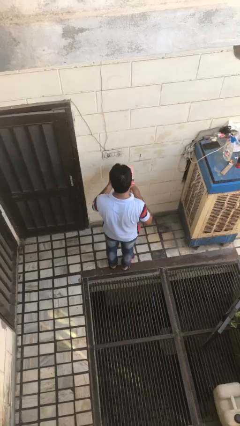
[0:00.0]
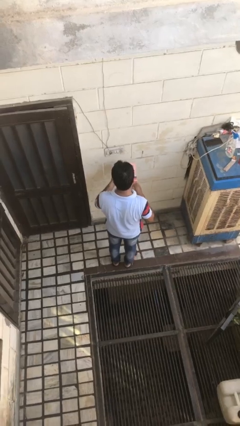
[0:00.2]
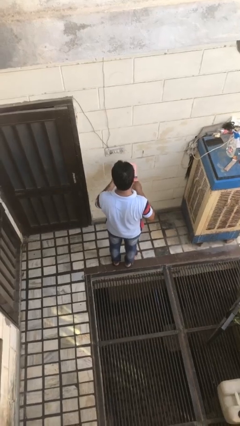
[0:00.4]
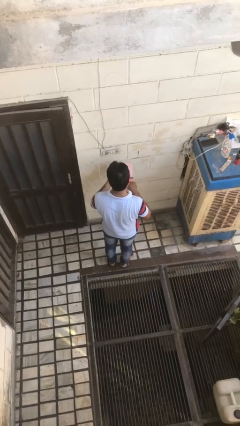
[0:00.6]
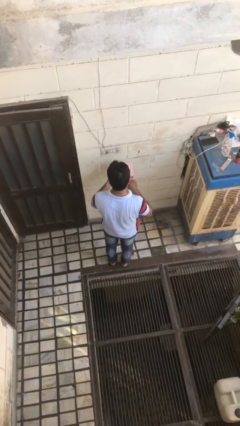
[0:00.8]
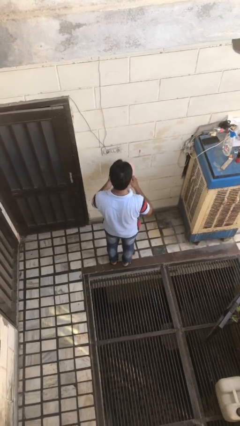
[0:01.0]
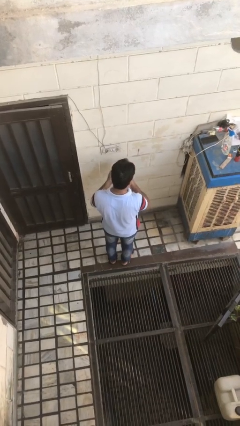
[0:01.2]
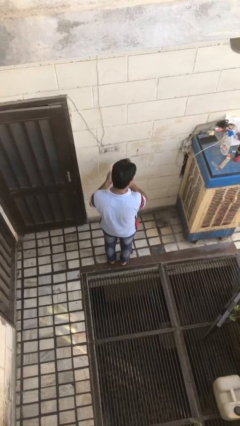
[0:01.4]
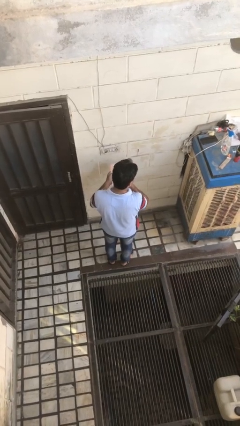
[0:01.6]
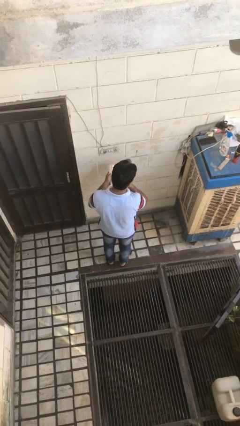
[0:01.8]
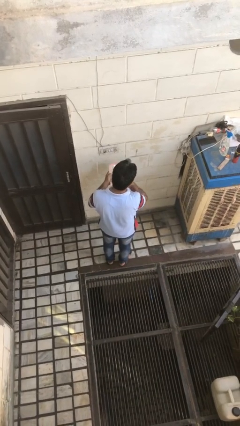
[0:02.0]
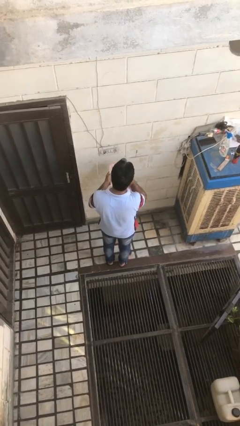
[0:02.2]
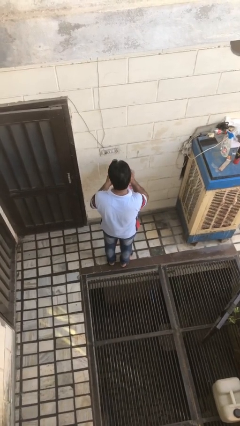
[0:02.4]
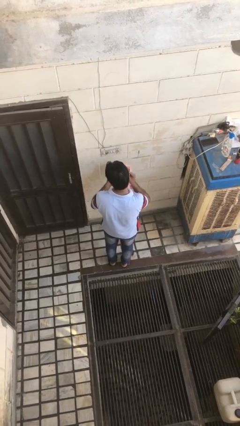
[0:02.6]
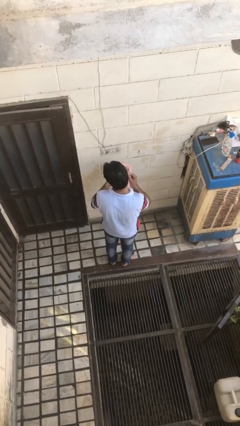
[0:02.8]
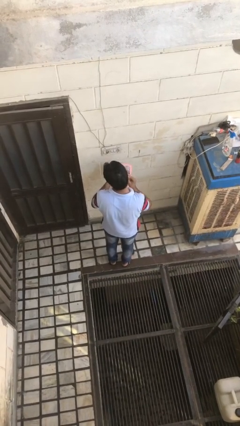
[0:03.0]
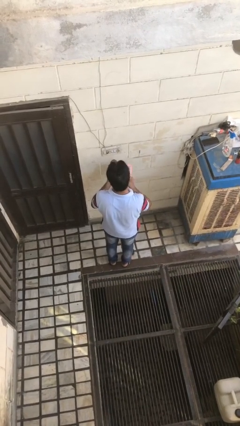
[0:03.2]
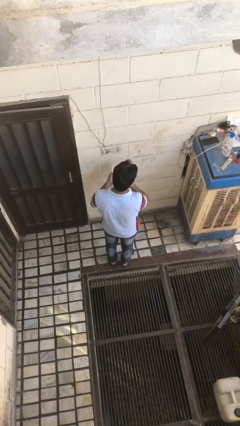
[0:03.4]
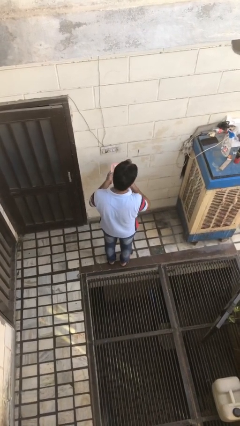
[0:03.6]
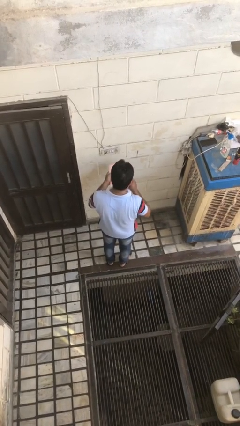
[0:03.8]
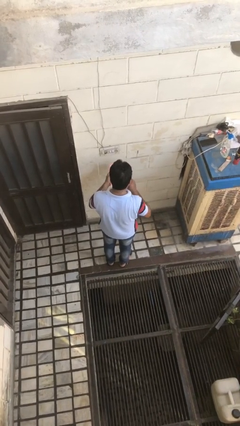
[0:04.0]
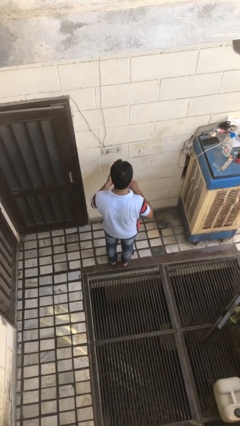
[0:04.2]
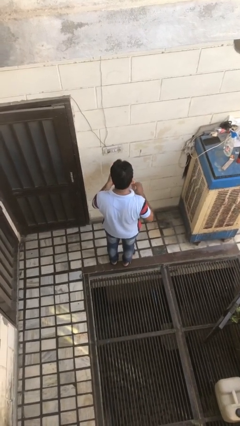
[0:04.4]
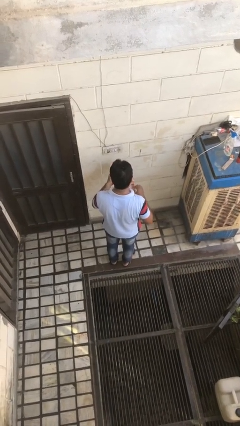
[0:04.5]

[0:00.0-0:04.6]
person applies foundation makeup

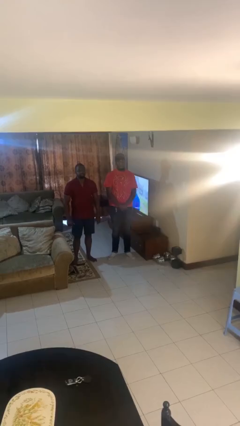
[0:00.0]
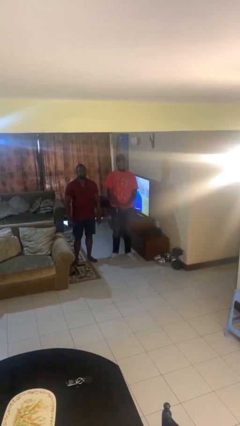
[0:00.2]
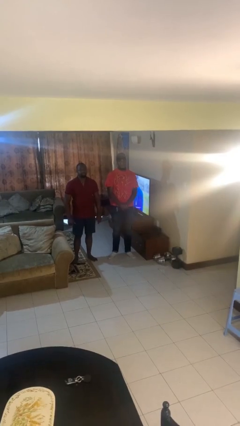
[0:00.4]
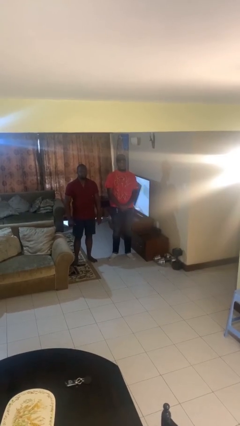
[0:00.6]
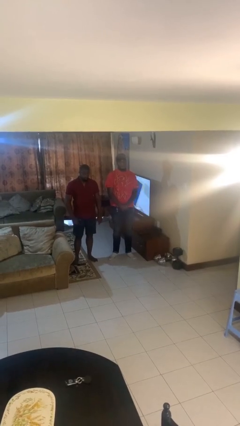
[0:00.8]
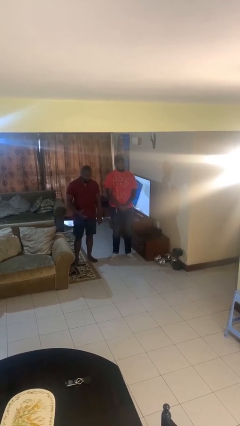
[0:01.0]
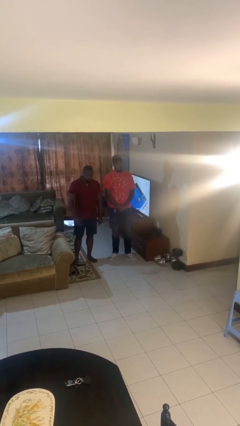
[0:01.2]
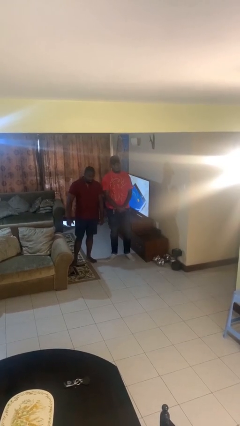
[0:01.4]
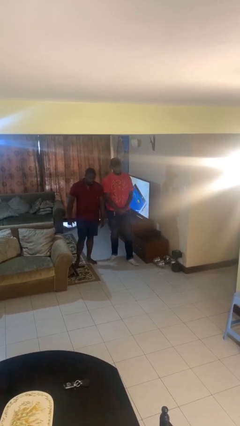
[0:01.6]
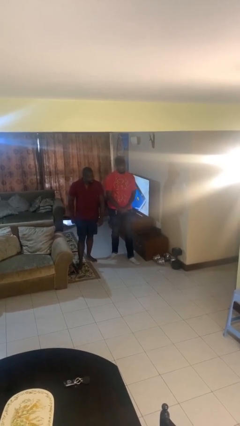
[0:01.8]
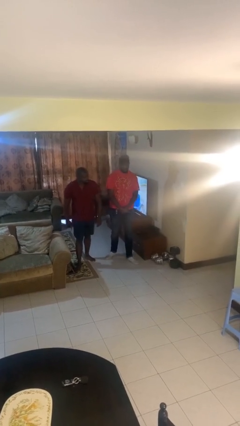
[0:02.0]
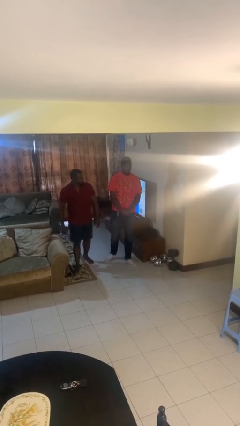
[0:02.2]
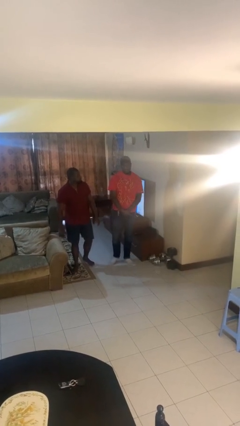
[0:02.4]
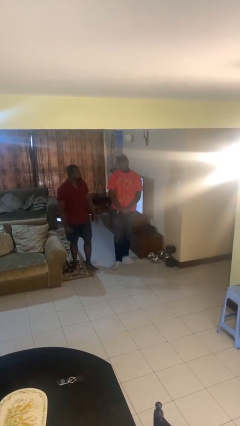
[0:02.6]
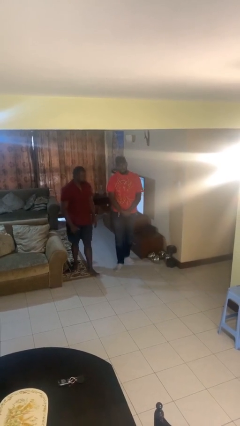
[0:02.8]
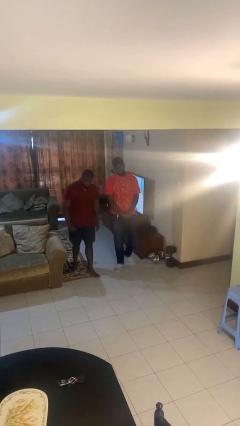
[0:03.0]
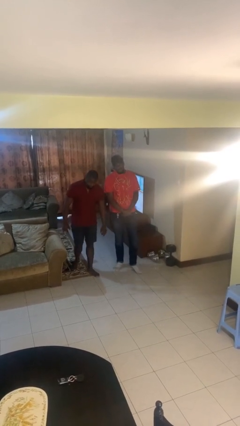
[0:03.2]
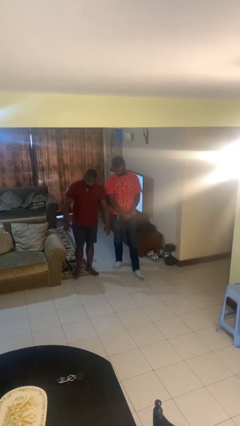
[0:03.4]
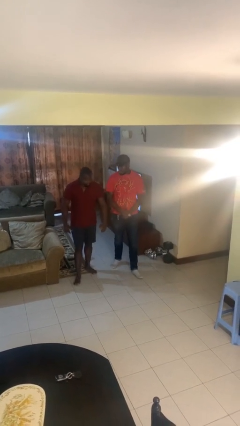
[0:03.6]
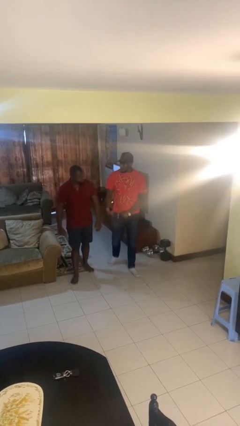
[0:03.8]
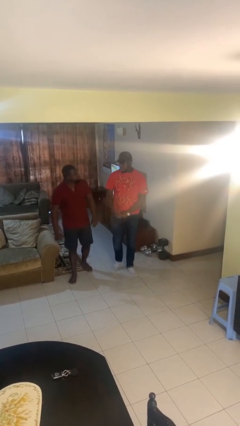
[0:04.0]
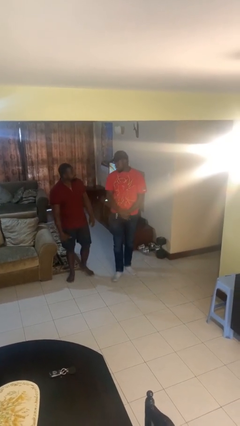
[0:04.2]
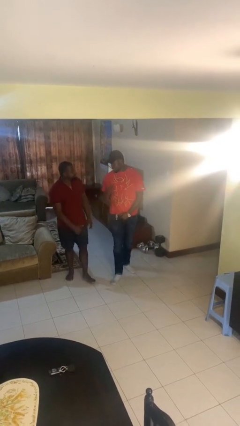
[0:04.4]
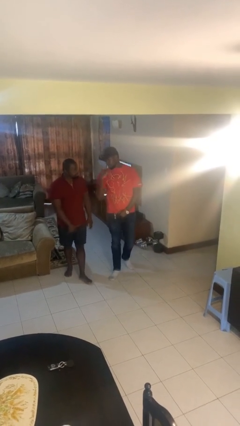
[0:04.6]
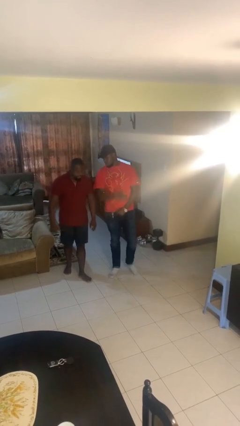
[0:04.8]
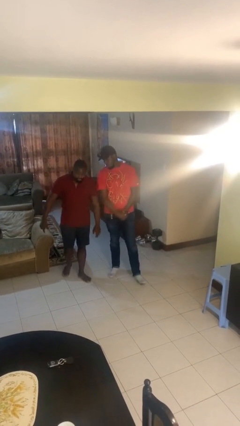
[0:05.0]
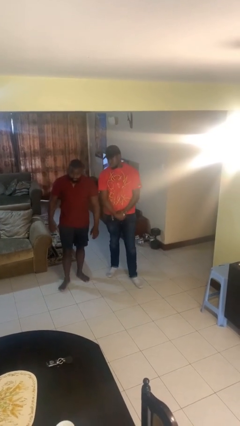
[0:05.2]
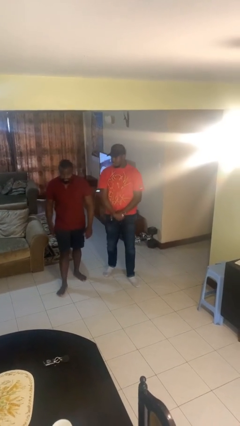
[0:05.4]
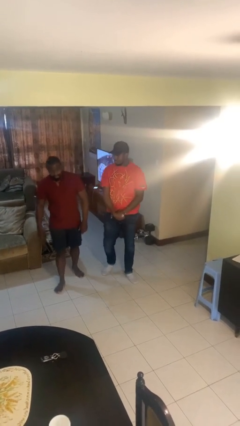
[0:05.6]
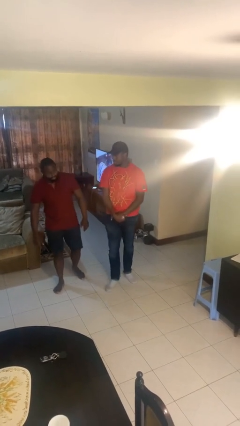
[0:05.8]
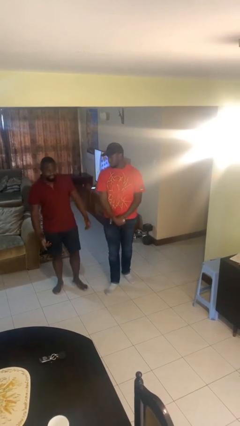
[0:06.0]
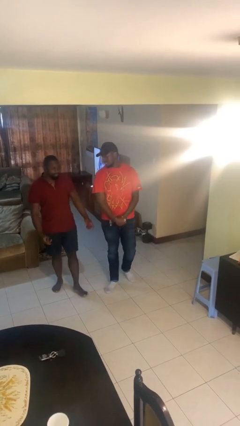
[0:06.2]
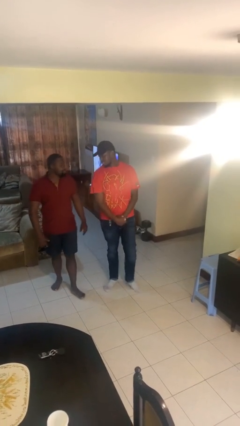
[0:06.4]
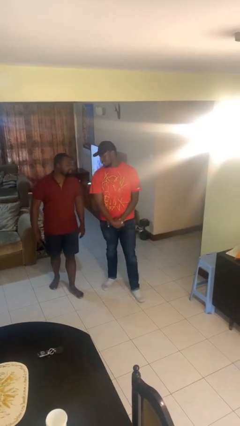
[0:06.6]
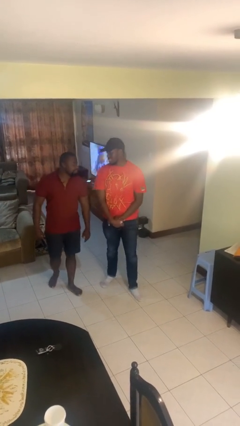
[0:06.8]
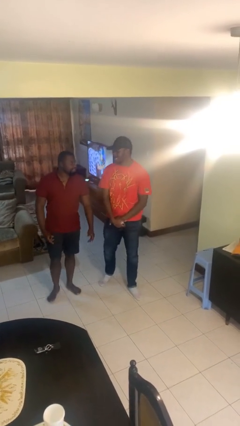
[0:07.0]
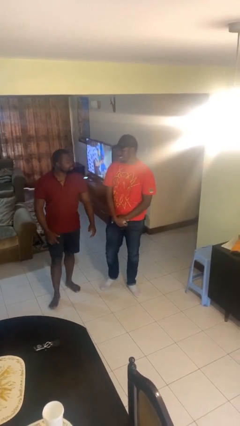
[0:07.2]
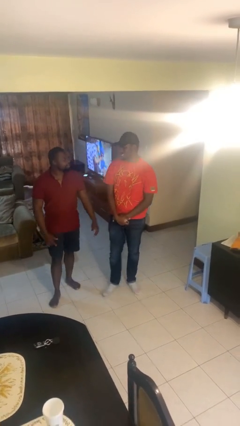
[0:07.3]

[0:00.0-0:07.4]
person talks to person

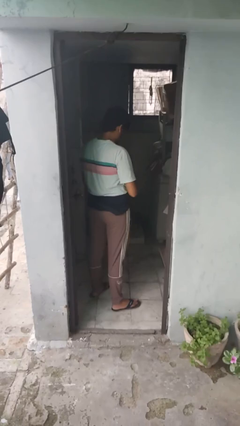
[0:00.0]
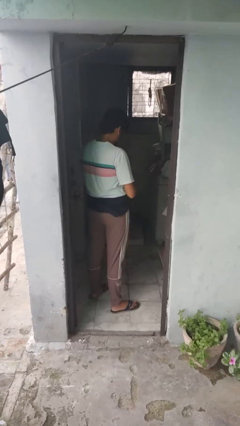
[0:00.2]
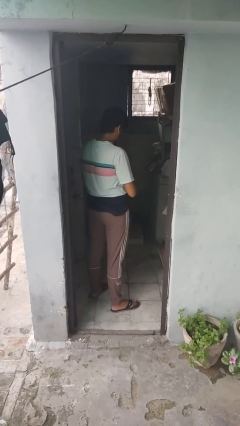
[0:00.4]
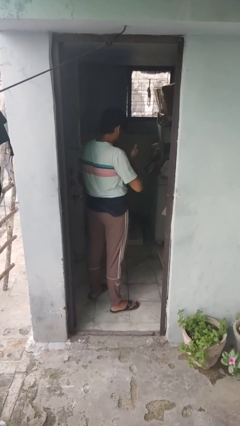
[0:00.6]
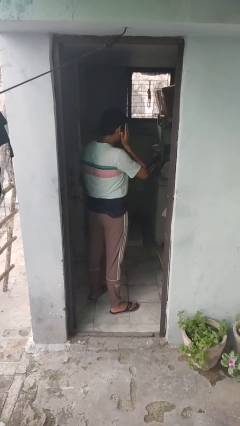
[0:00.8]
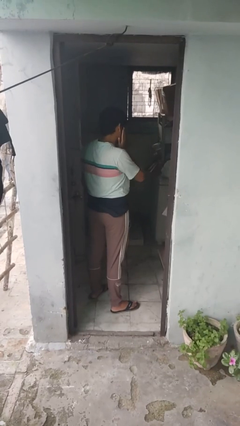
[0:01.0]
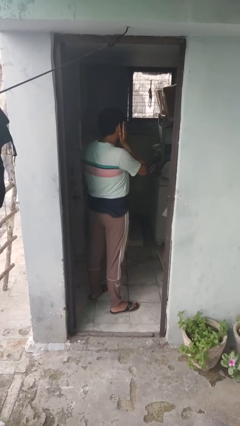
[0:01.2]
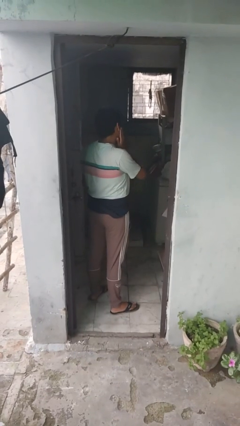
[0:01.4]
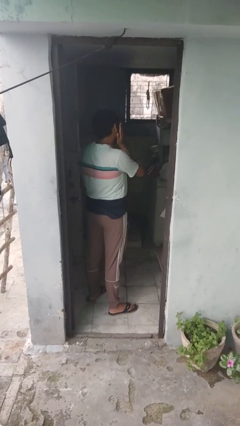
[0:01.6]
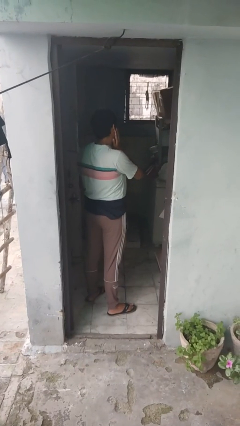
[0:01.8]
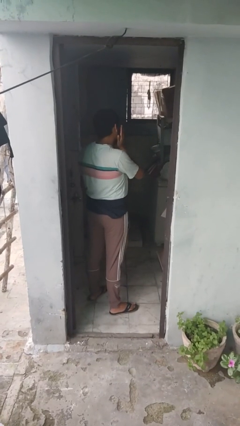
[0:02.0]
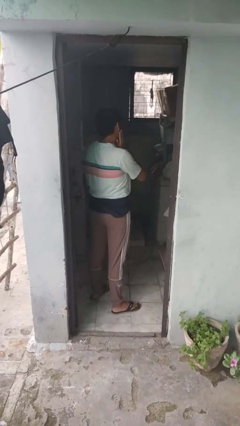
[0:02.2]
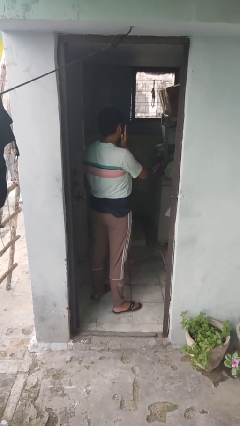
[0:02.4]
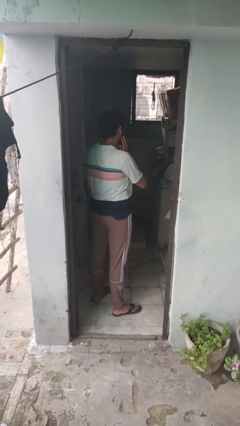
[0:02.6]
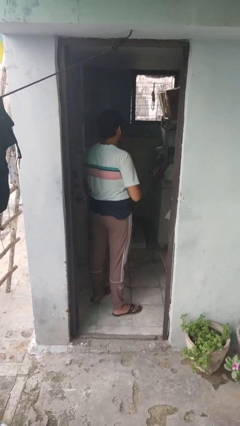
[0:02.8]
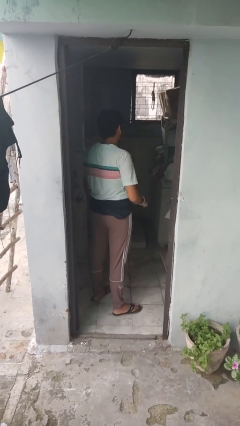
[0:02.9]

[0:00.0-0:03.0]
person applies shaving cream

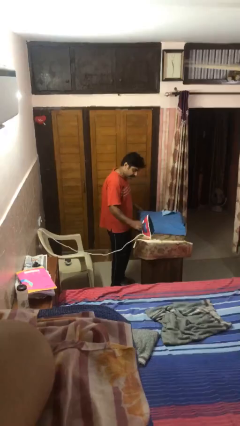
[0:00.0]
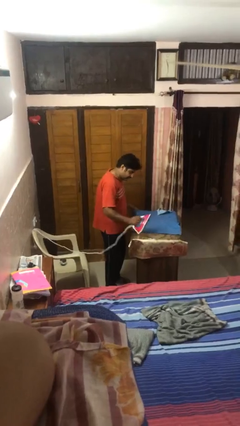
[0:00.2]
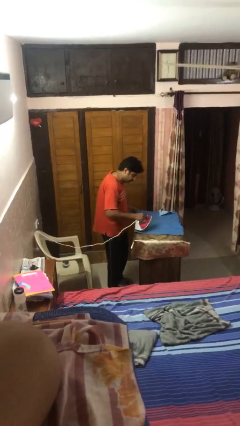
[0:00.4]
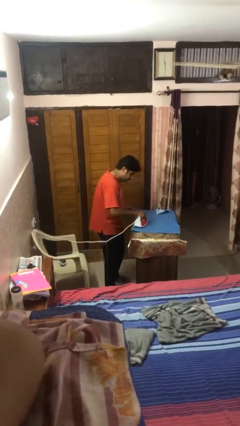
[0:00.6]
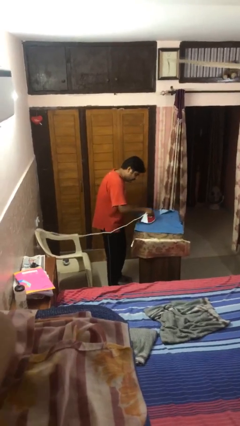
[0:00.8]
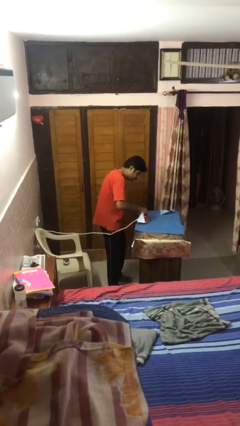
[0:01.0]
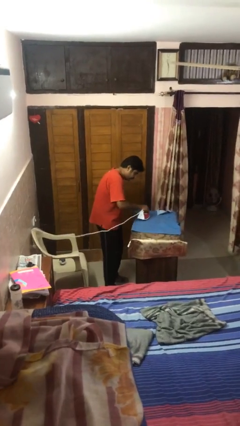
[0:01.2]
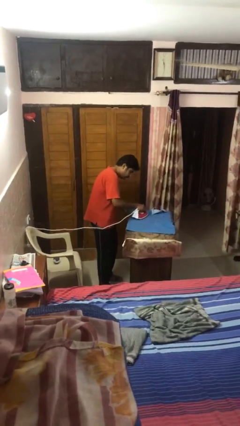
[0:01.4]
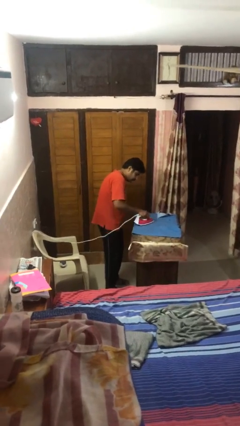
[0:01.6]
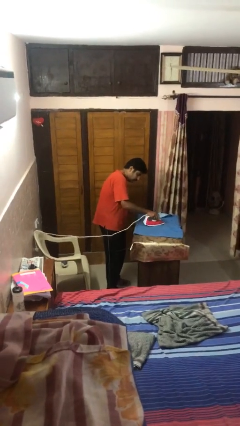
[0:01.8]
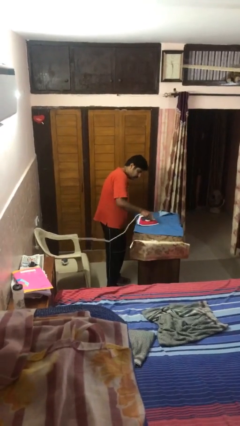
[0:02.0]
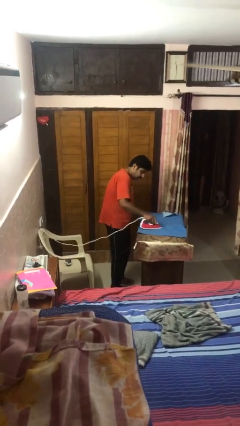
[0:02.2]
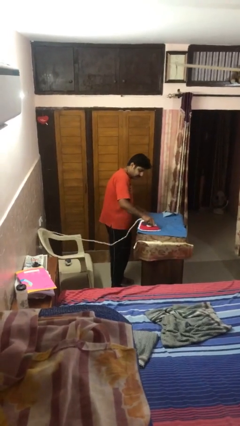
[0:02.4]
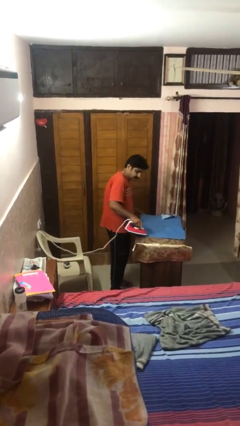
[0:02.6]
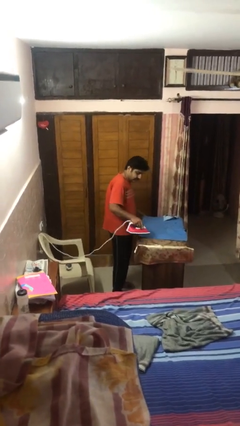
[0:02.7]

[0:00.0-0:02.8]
person irons clothes
